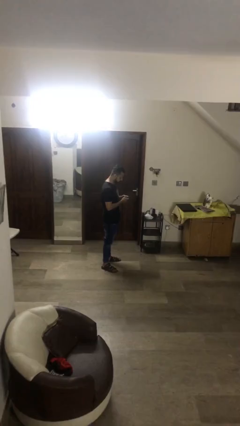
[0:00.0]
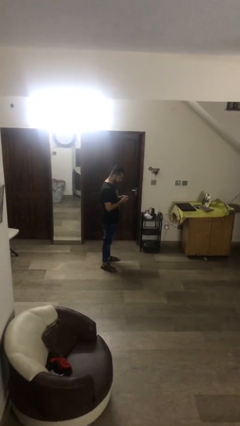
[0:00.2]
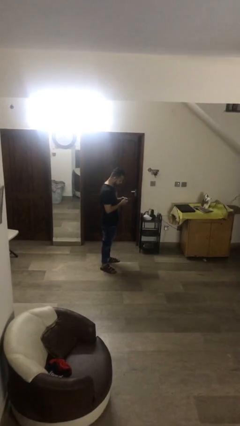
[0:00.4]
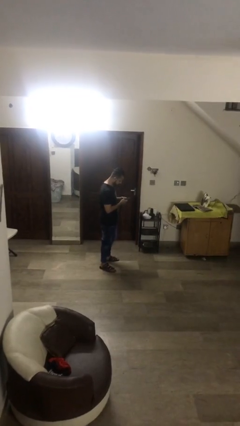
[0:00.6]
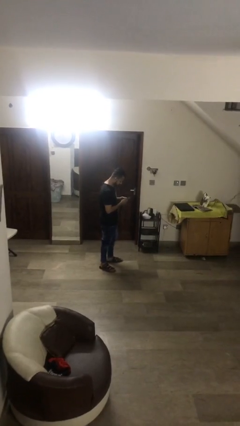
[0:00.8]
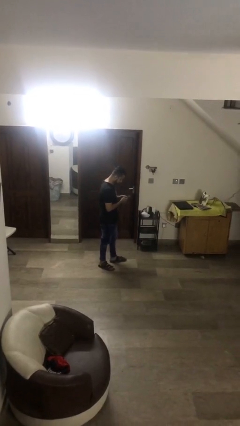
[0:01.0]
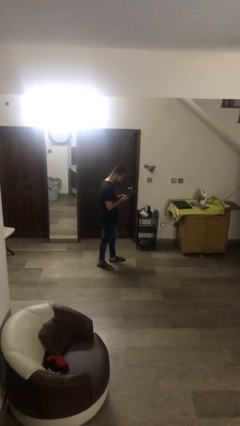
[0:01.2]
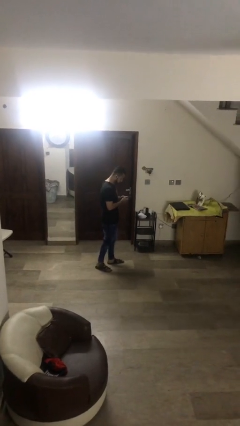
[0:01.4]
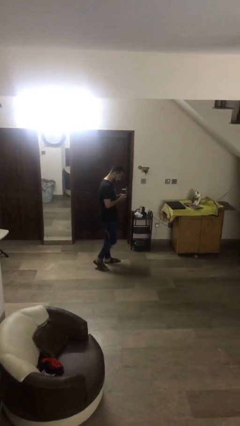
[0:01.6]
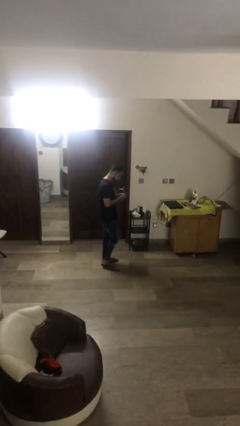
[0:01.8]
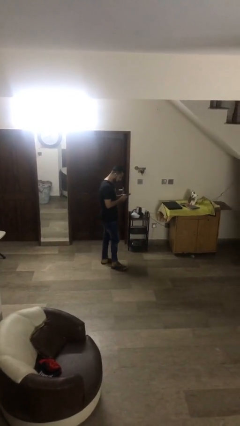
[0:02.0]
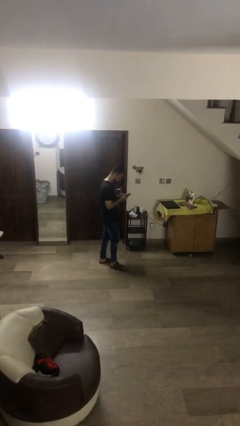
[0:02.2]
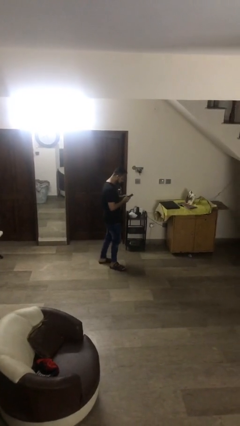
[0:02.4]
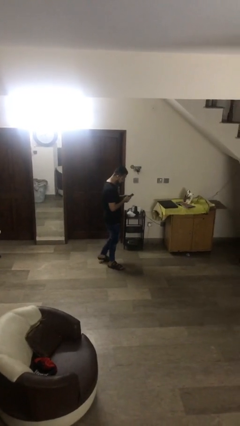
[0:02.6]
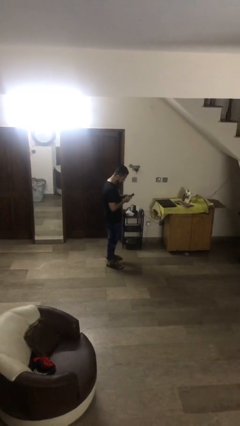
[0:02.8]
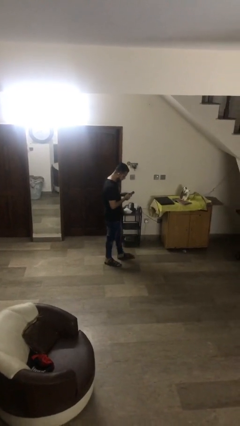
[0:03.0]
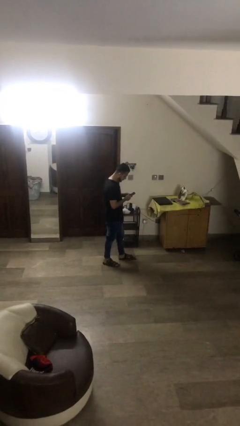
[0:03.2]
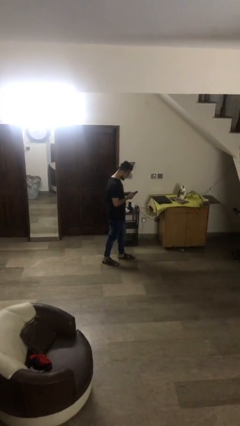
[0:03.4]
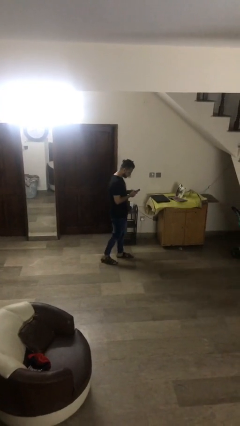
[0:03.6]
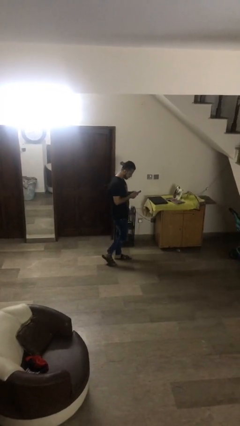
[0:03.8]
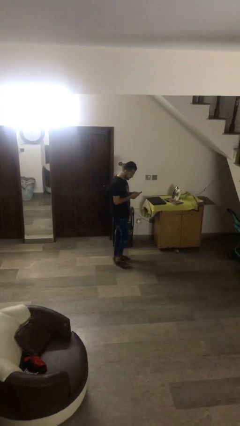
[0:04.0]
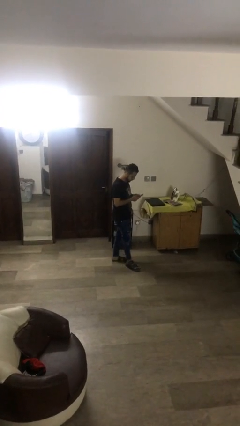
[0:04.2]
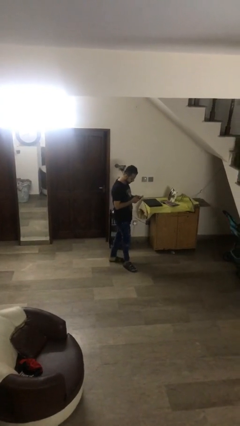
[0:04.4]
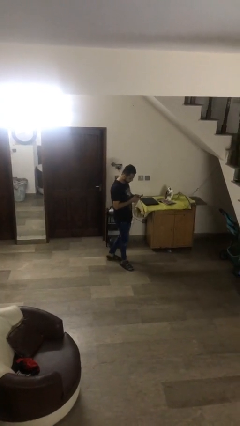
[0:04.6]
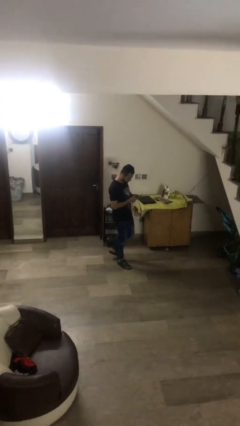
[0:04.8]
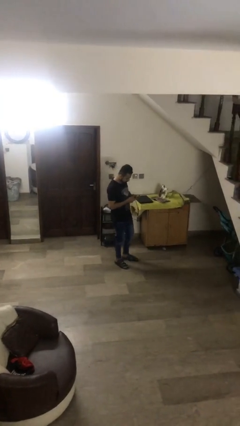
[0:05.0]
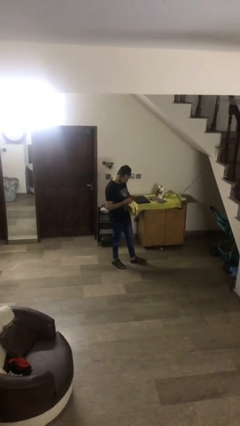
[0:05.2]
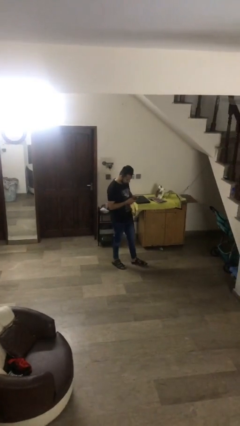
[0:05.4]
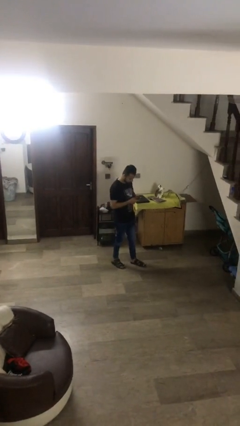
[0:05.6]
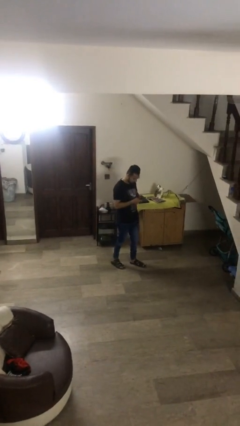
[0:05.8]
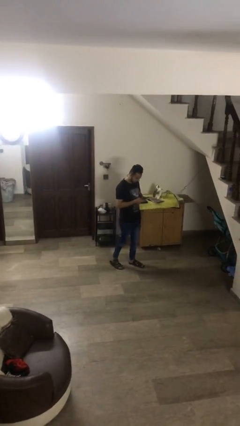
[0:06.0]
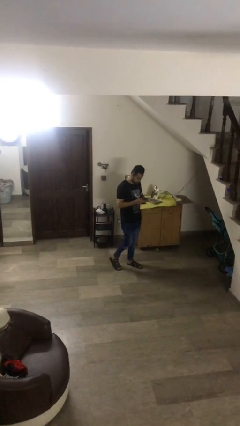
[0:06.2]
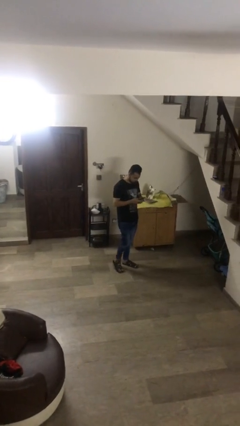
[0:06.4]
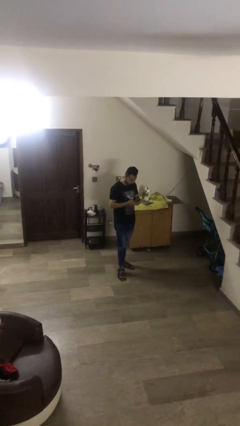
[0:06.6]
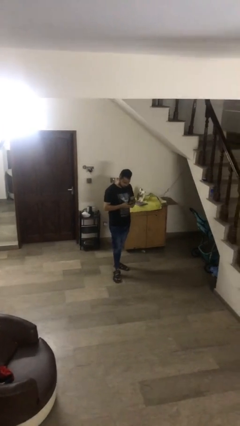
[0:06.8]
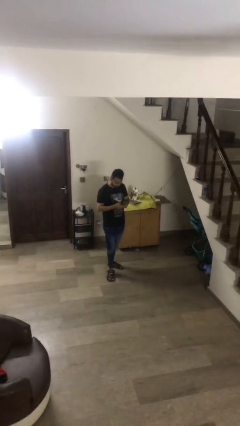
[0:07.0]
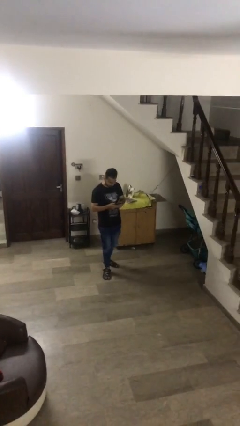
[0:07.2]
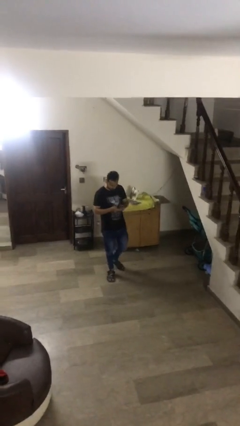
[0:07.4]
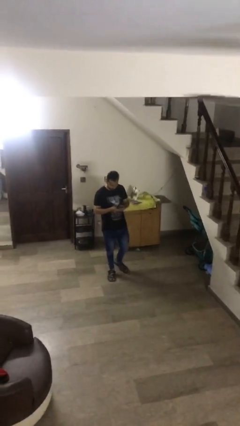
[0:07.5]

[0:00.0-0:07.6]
person texts on phone

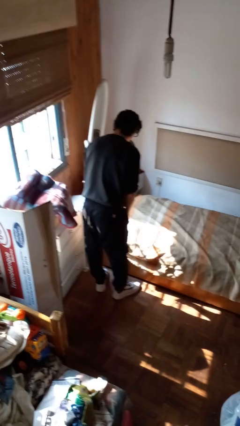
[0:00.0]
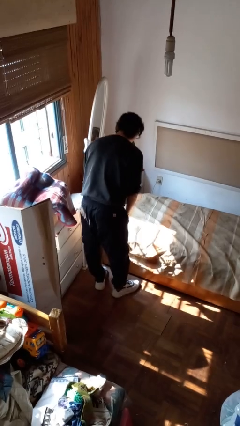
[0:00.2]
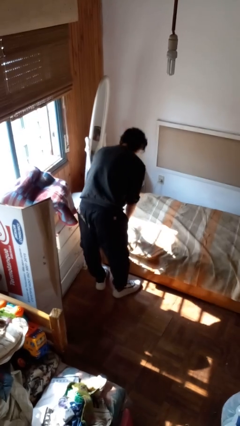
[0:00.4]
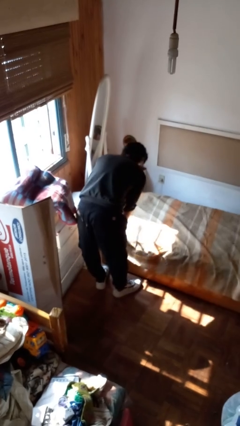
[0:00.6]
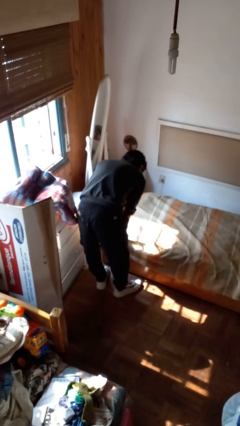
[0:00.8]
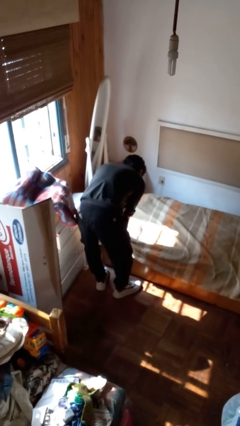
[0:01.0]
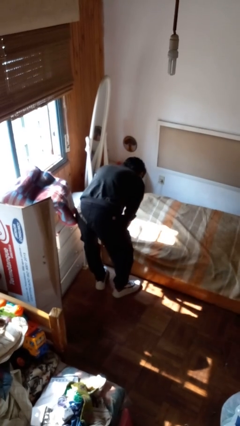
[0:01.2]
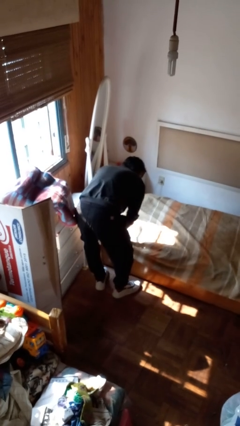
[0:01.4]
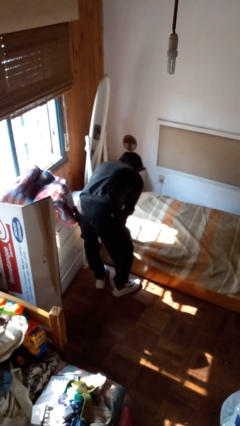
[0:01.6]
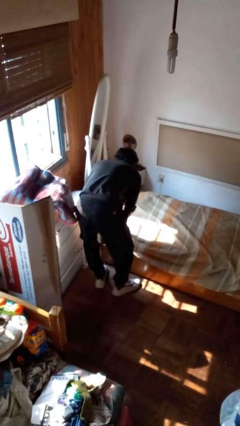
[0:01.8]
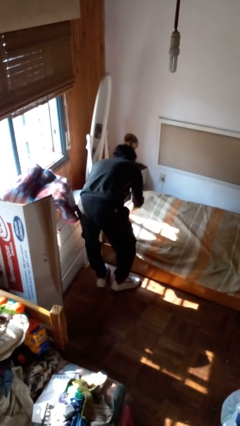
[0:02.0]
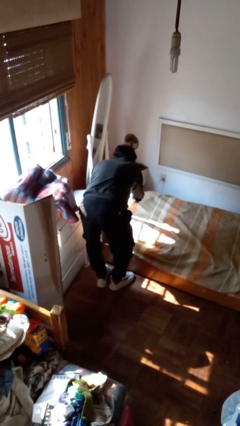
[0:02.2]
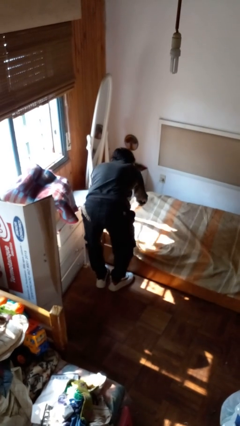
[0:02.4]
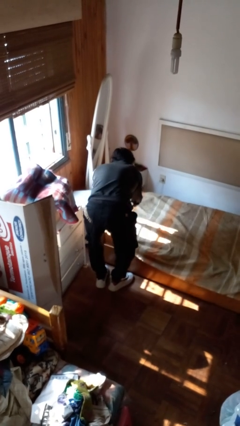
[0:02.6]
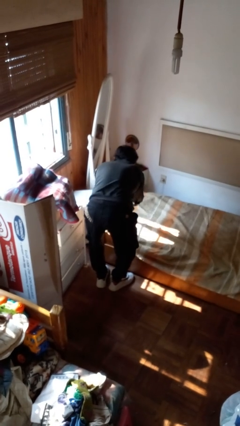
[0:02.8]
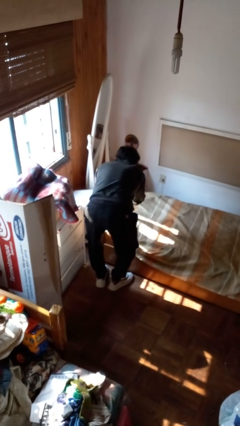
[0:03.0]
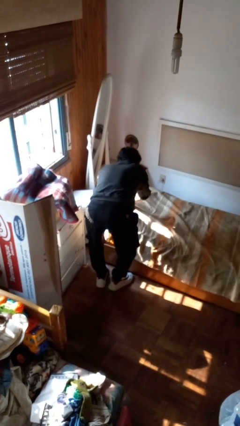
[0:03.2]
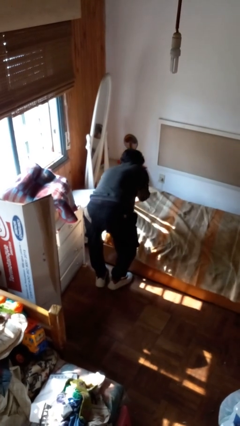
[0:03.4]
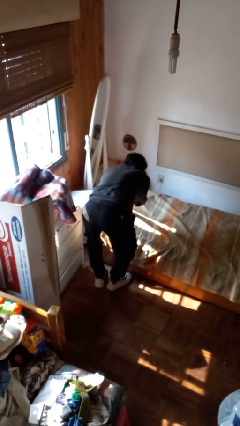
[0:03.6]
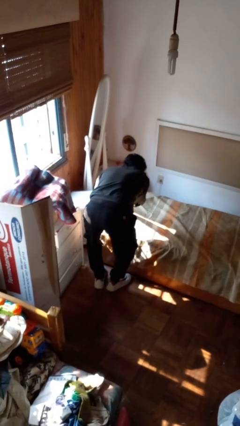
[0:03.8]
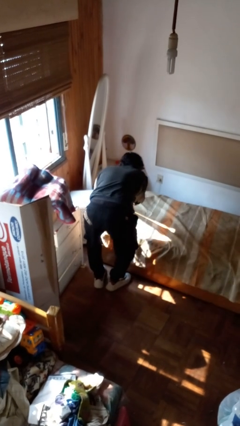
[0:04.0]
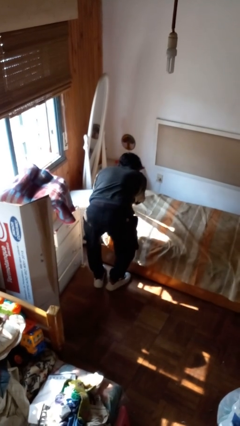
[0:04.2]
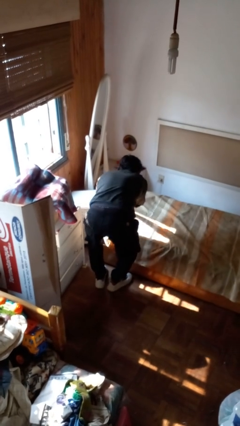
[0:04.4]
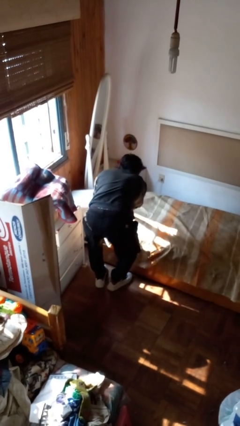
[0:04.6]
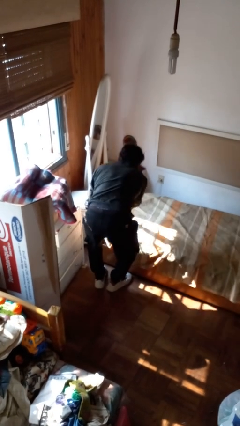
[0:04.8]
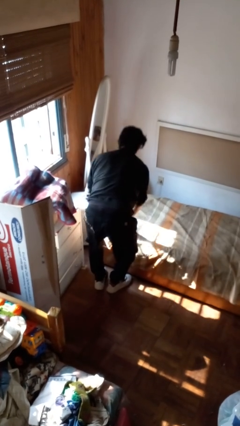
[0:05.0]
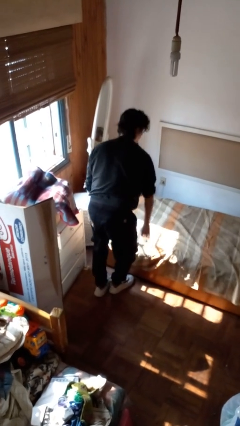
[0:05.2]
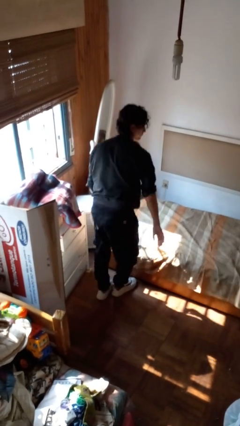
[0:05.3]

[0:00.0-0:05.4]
person makes bed

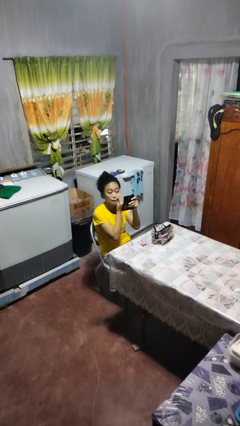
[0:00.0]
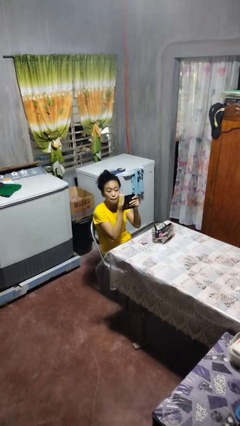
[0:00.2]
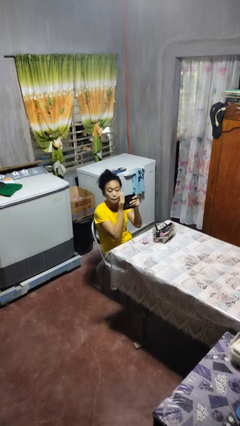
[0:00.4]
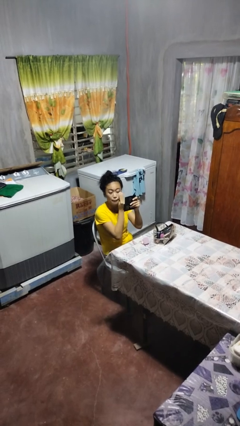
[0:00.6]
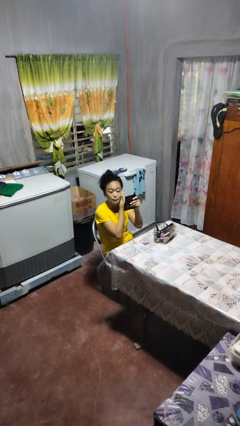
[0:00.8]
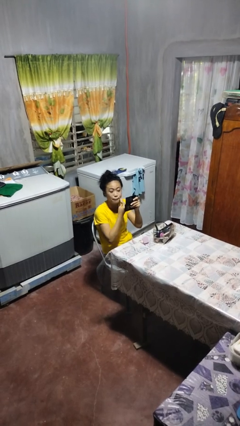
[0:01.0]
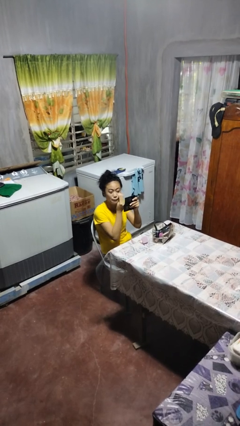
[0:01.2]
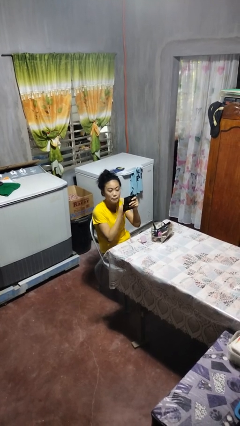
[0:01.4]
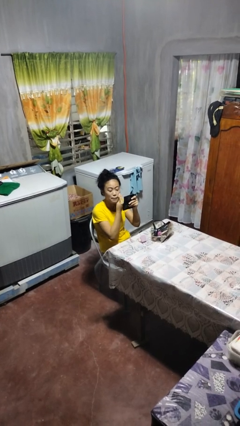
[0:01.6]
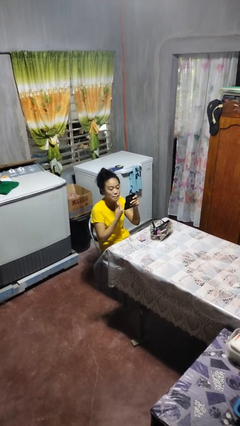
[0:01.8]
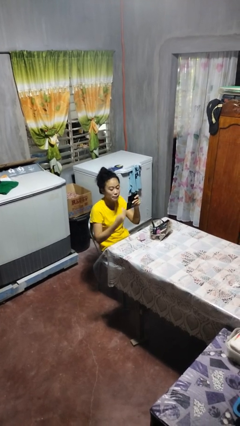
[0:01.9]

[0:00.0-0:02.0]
person applies foundation makeup

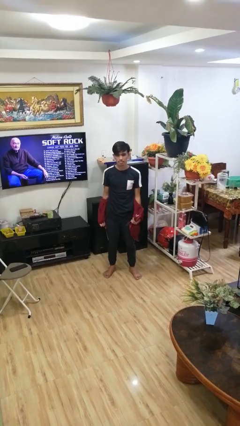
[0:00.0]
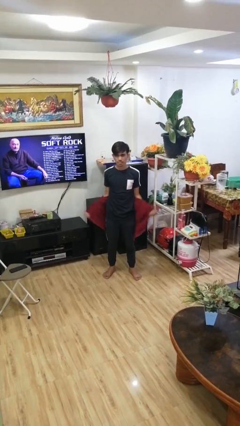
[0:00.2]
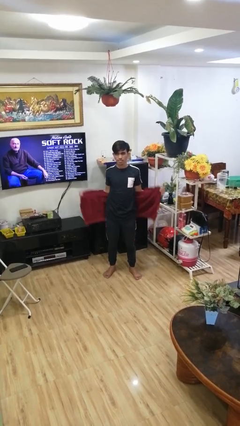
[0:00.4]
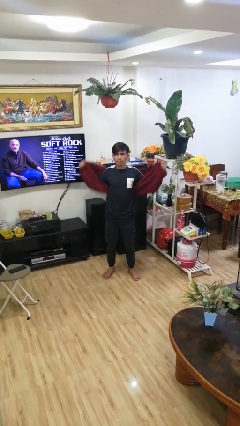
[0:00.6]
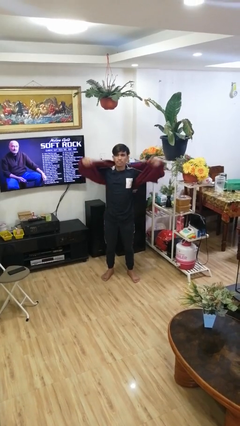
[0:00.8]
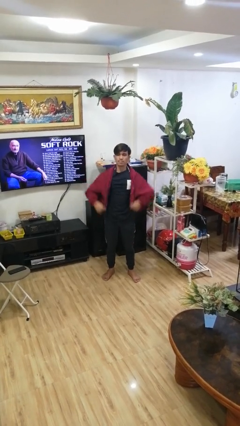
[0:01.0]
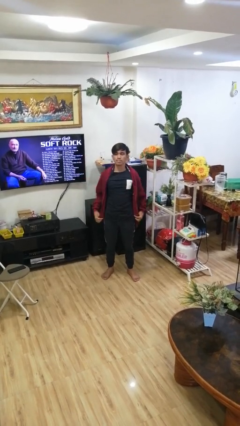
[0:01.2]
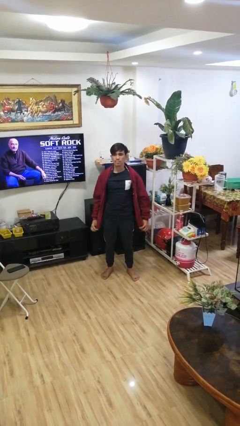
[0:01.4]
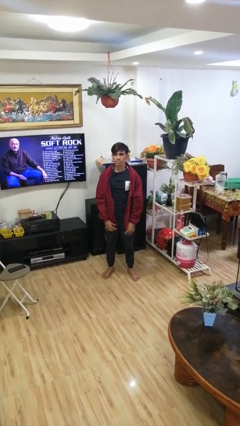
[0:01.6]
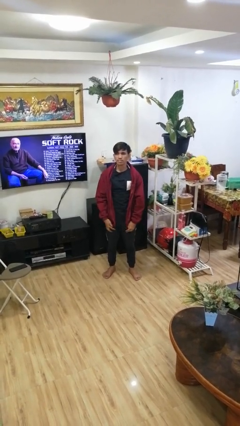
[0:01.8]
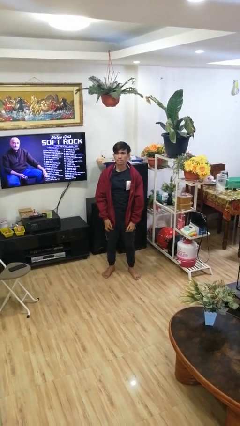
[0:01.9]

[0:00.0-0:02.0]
person puts on jacket

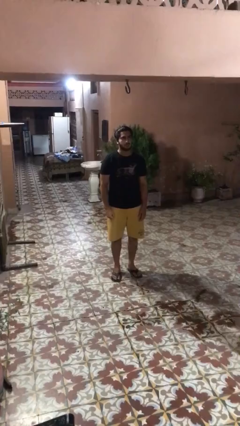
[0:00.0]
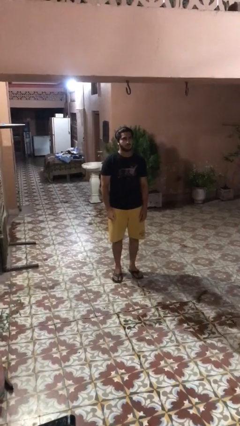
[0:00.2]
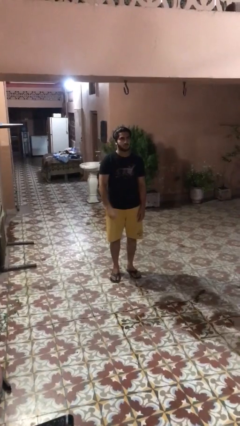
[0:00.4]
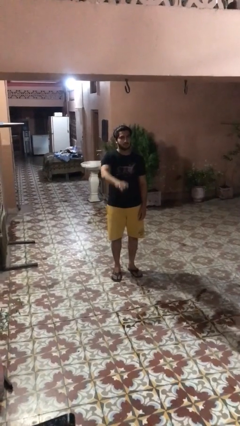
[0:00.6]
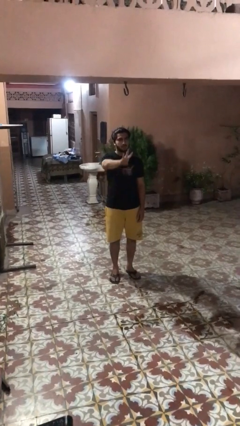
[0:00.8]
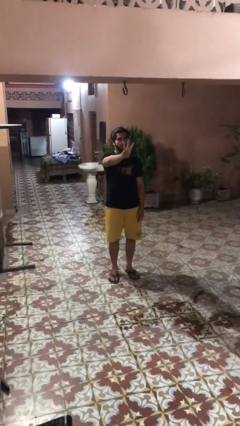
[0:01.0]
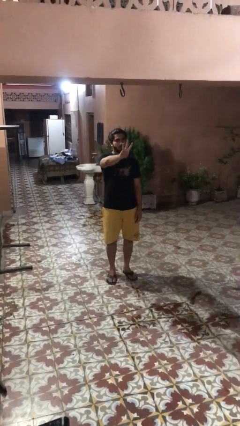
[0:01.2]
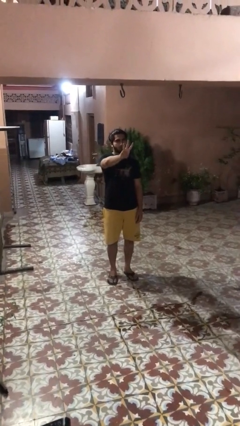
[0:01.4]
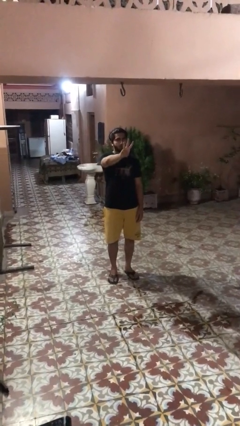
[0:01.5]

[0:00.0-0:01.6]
person gestures number three
